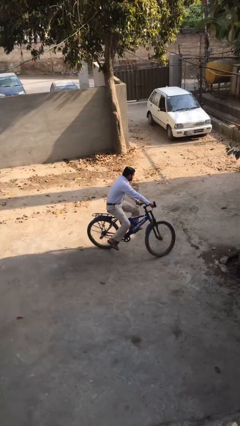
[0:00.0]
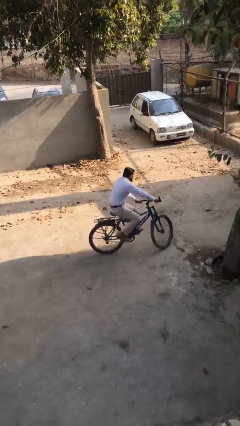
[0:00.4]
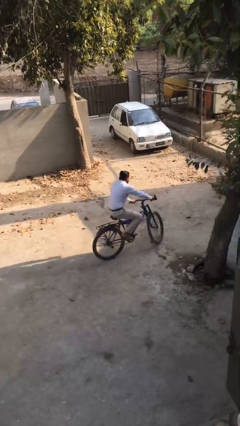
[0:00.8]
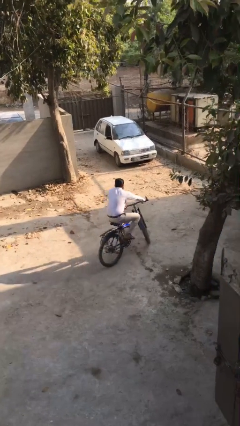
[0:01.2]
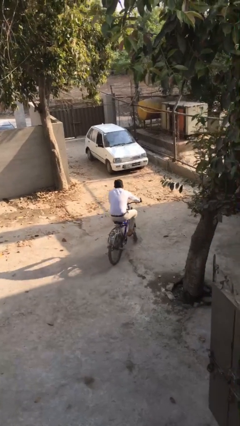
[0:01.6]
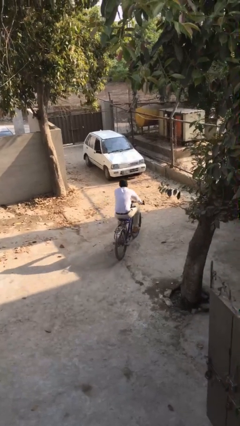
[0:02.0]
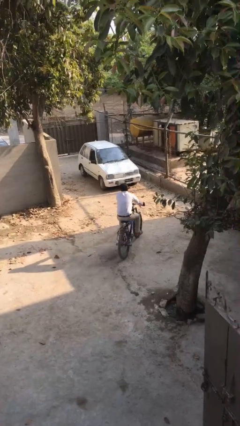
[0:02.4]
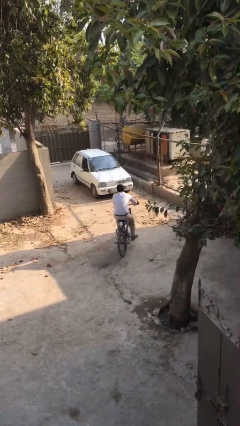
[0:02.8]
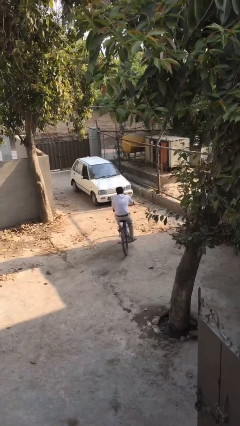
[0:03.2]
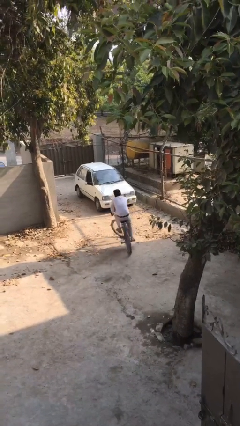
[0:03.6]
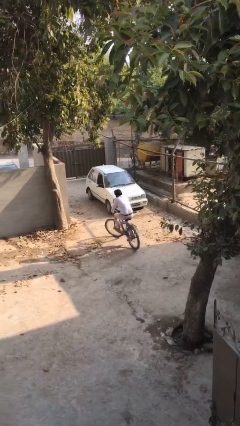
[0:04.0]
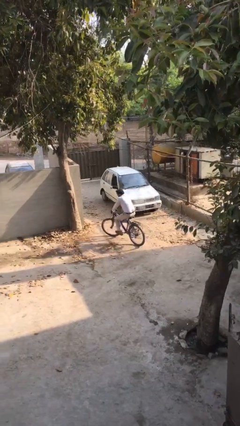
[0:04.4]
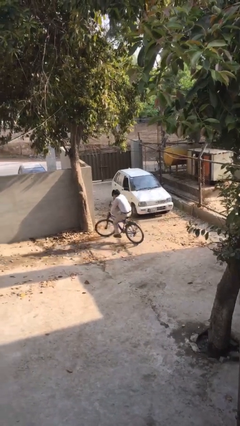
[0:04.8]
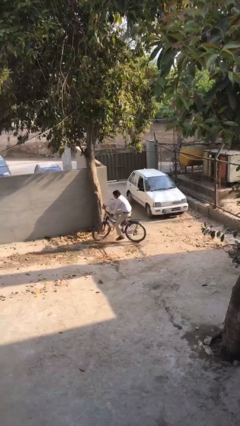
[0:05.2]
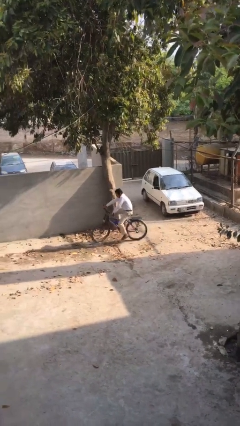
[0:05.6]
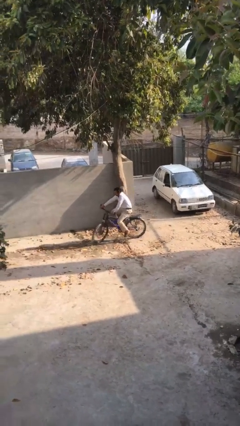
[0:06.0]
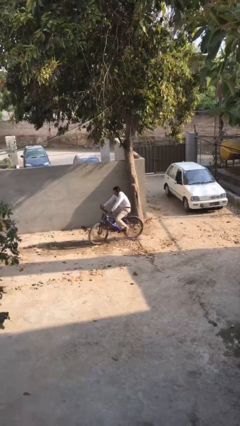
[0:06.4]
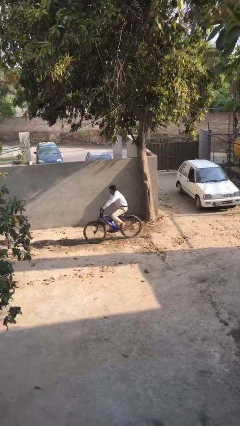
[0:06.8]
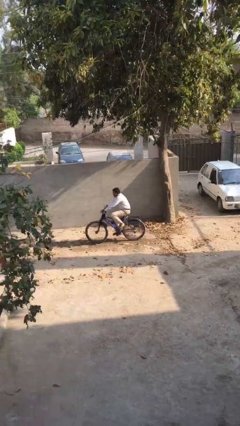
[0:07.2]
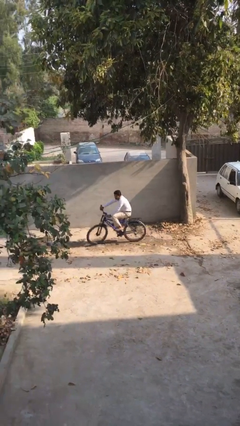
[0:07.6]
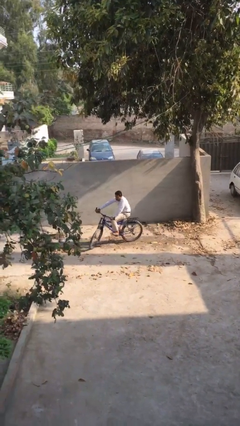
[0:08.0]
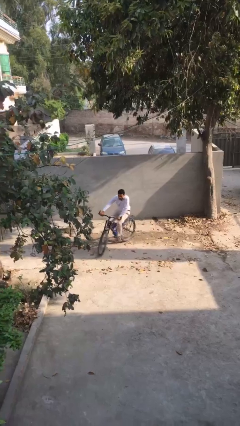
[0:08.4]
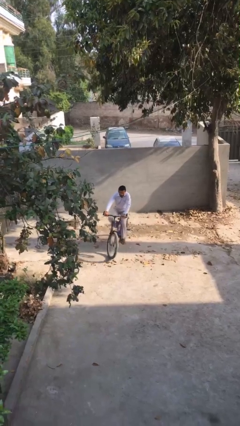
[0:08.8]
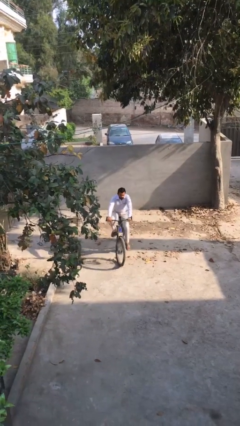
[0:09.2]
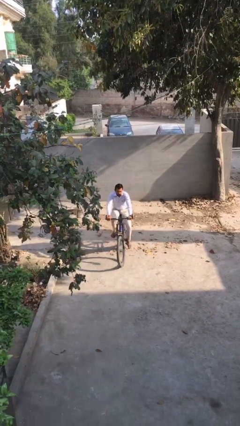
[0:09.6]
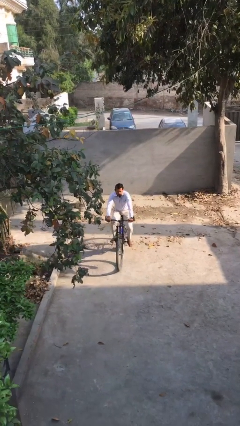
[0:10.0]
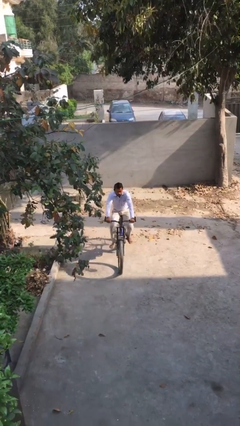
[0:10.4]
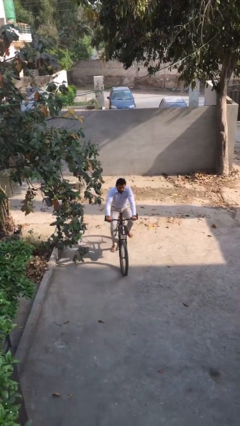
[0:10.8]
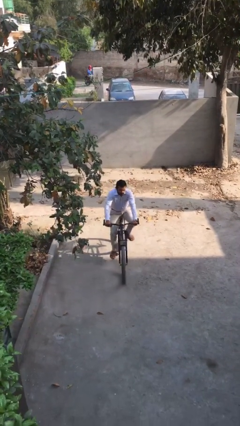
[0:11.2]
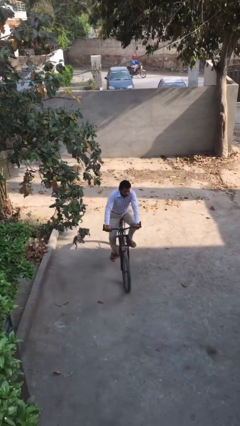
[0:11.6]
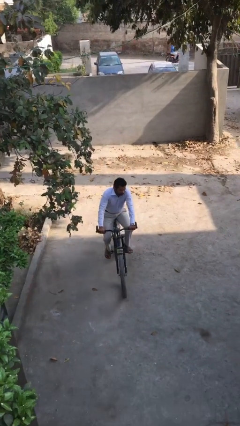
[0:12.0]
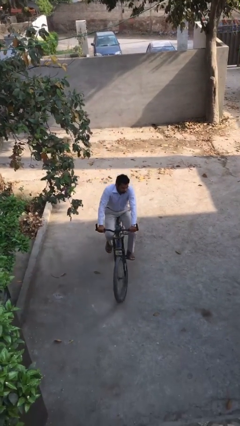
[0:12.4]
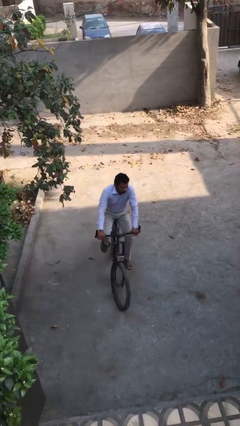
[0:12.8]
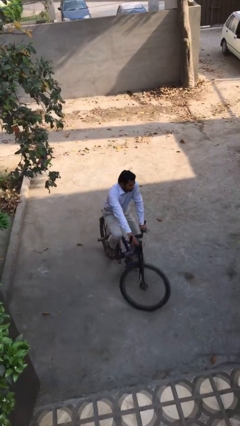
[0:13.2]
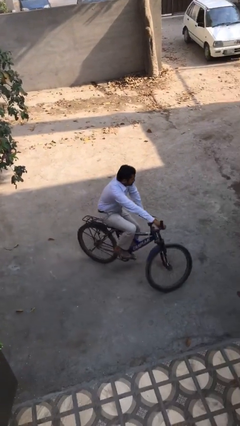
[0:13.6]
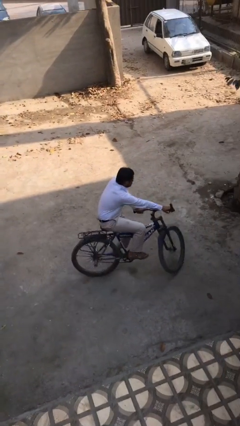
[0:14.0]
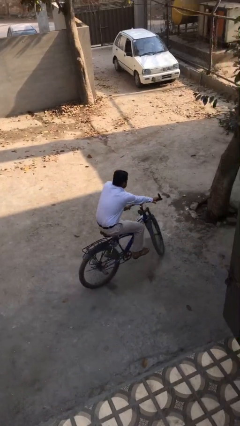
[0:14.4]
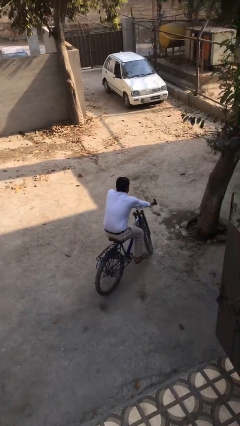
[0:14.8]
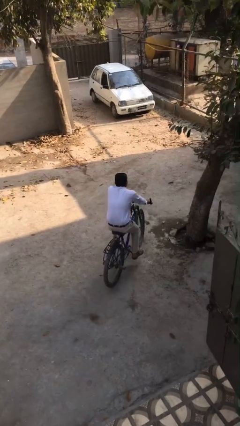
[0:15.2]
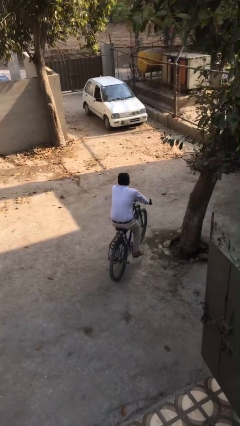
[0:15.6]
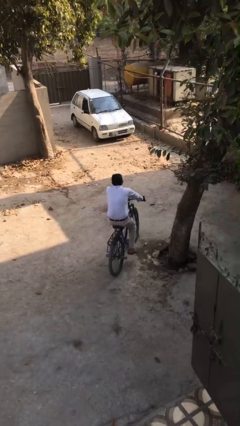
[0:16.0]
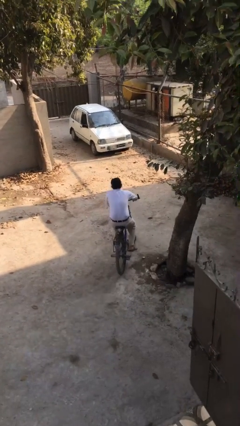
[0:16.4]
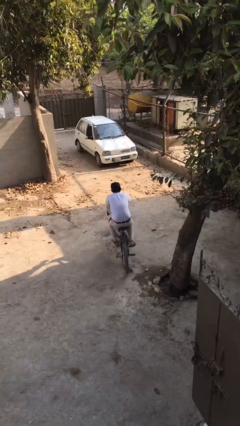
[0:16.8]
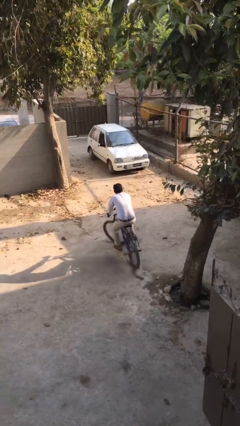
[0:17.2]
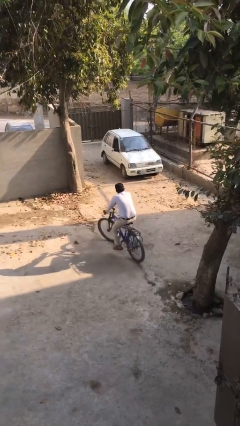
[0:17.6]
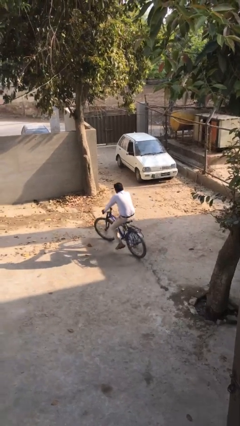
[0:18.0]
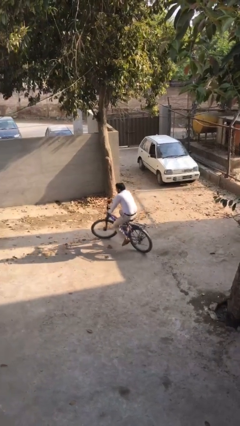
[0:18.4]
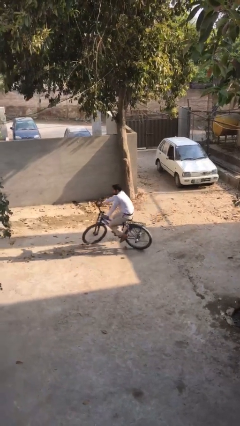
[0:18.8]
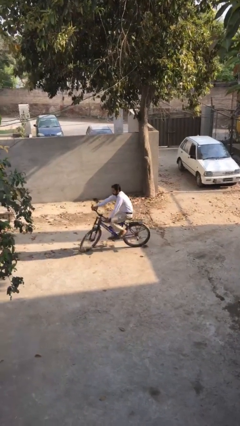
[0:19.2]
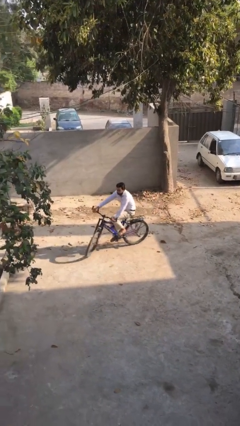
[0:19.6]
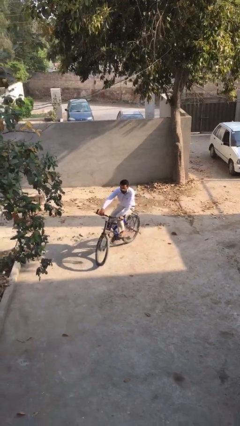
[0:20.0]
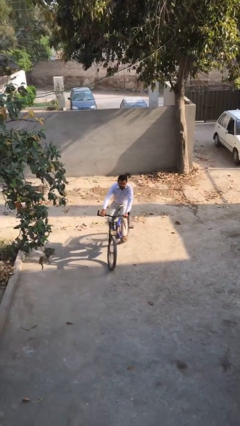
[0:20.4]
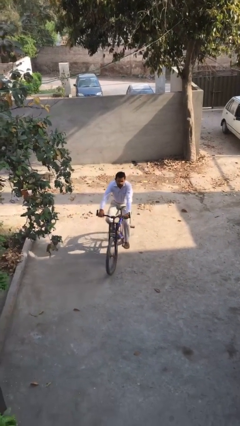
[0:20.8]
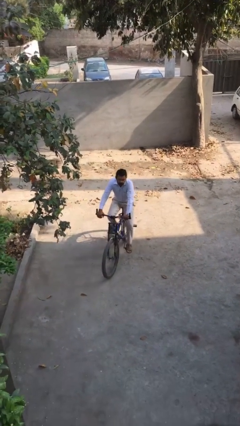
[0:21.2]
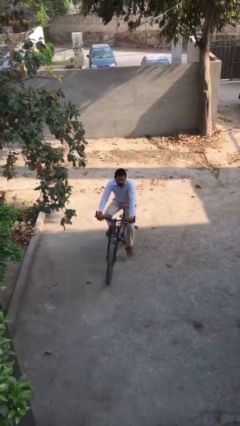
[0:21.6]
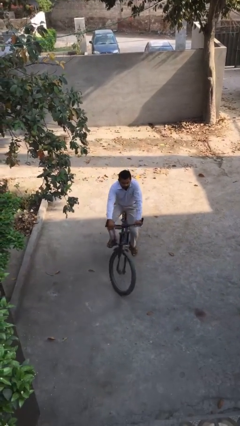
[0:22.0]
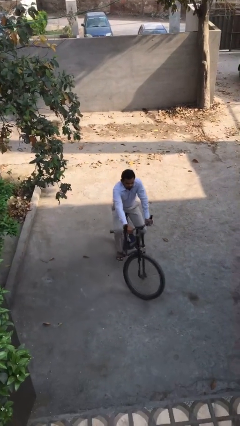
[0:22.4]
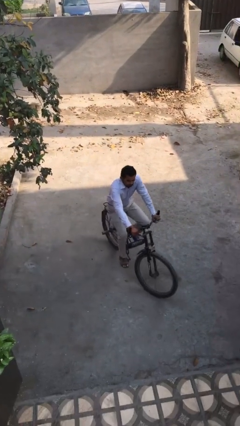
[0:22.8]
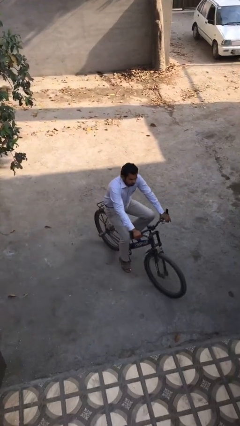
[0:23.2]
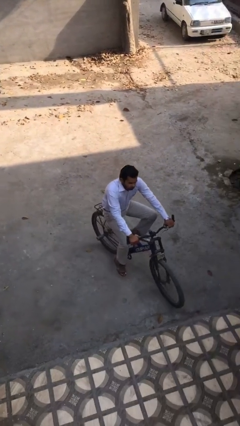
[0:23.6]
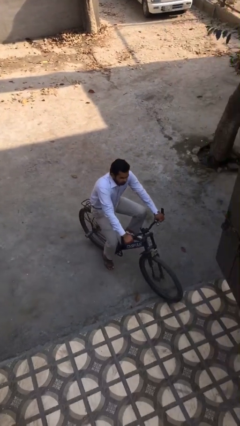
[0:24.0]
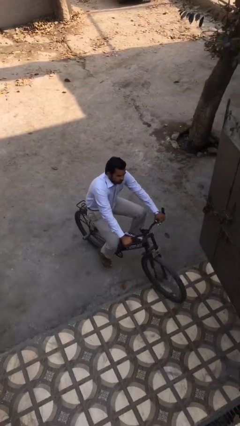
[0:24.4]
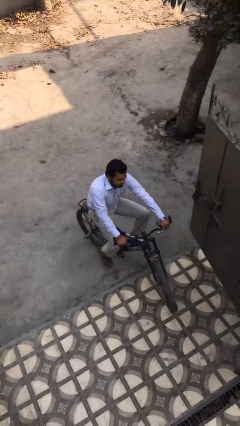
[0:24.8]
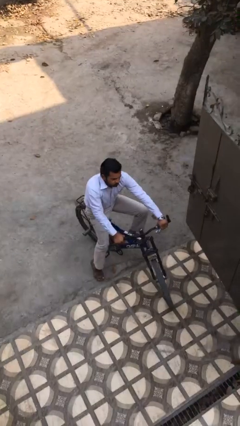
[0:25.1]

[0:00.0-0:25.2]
person rides bicycle

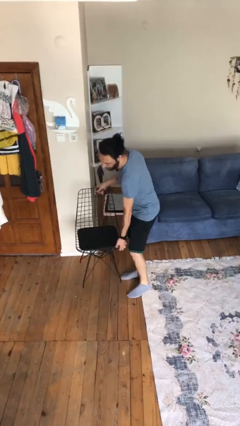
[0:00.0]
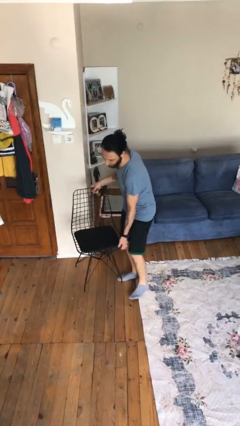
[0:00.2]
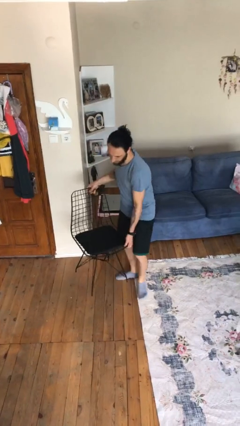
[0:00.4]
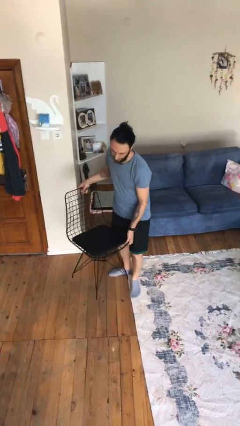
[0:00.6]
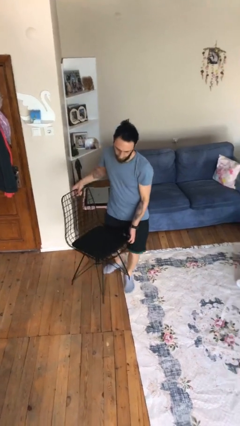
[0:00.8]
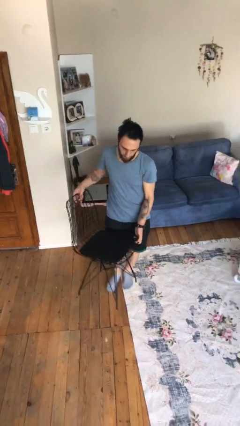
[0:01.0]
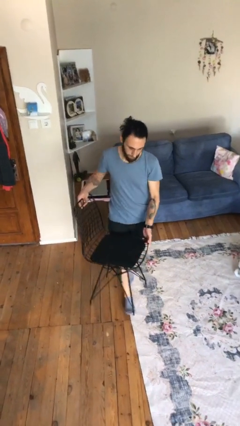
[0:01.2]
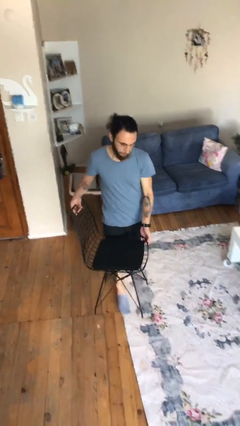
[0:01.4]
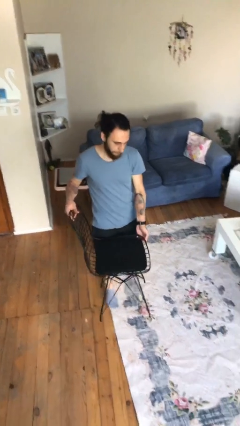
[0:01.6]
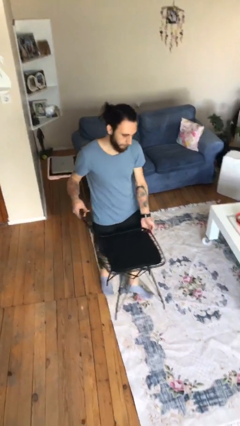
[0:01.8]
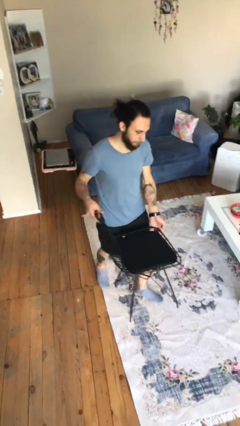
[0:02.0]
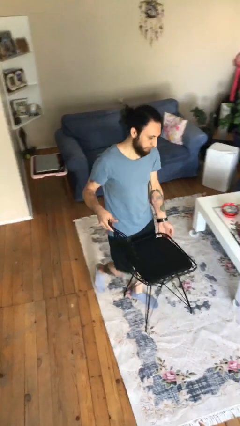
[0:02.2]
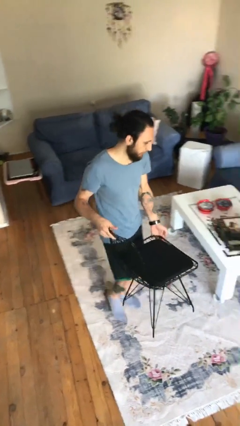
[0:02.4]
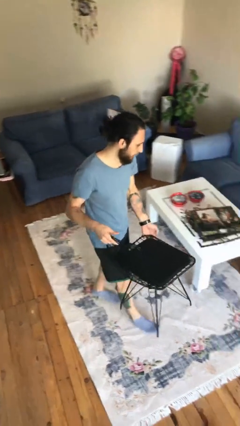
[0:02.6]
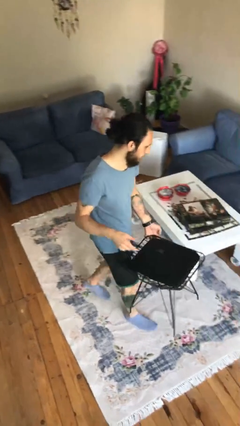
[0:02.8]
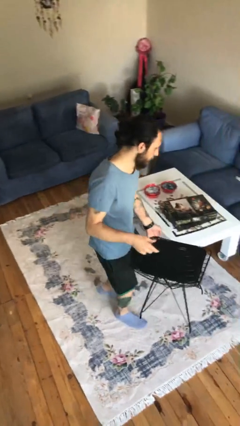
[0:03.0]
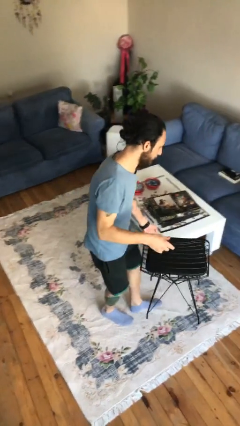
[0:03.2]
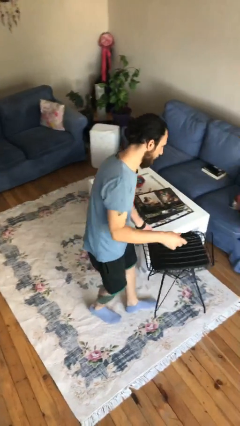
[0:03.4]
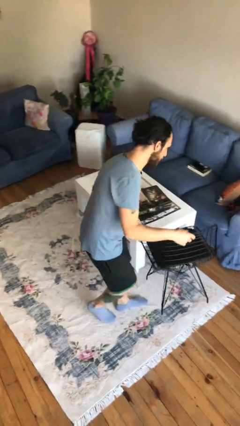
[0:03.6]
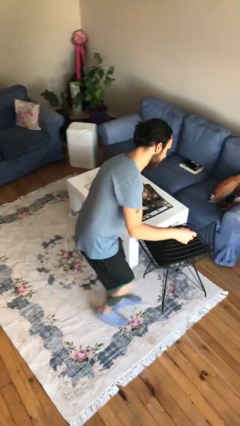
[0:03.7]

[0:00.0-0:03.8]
person carries heavy object

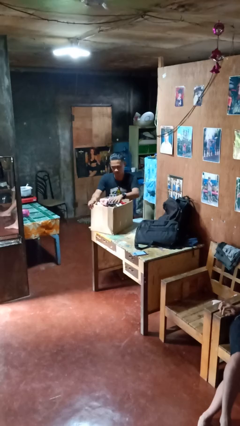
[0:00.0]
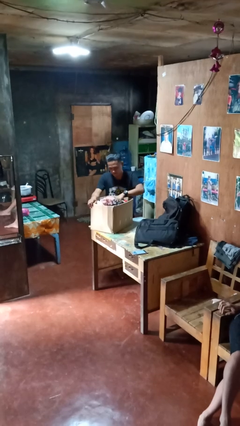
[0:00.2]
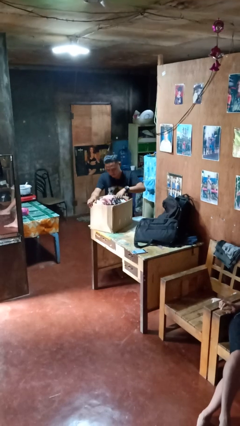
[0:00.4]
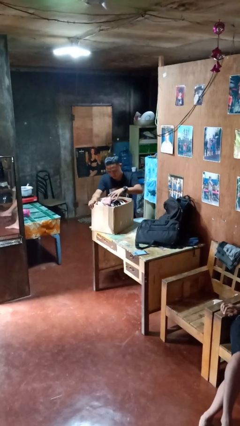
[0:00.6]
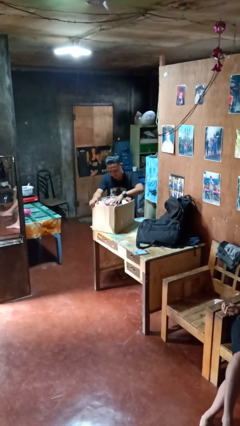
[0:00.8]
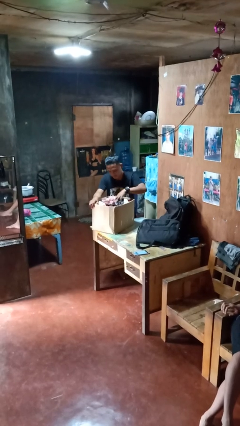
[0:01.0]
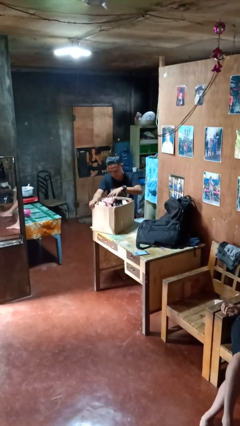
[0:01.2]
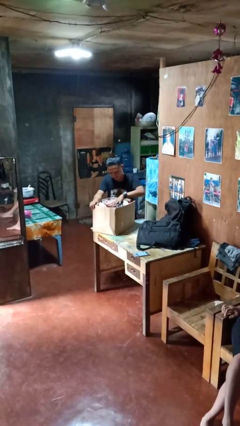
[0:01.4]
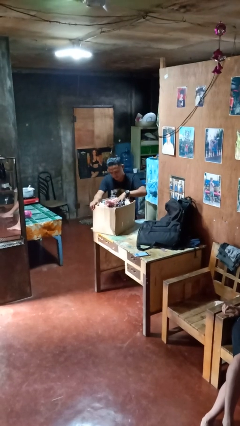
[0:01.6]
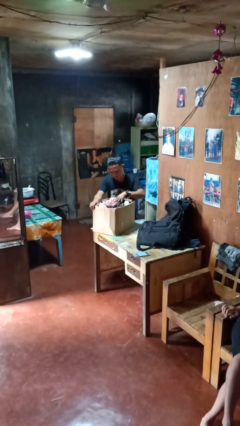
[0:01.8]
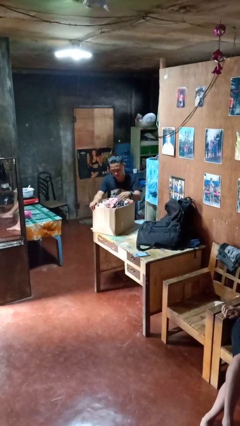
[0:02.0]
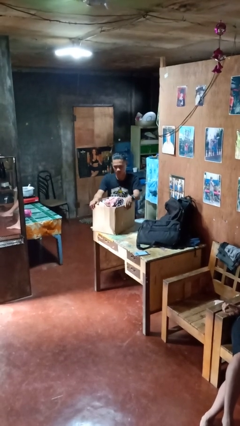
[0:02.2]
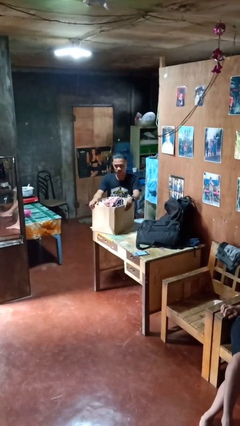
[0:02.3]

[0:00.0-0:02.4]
person searches in box
